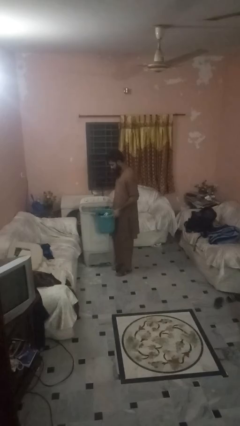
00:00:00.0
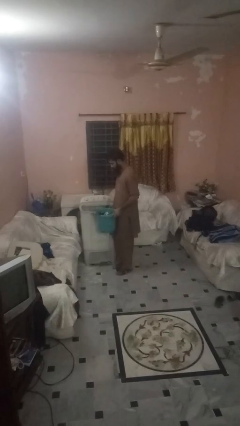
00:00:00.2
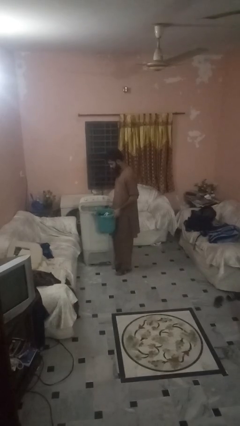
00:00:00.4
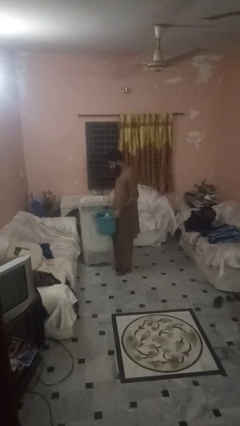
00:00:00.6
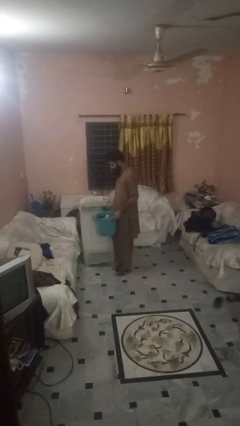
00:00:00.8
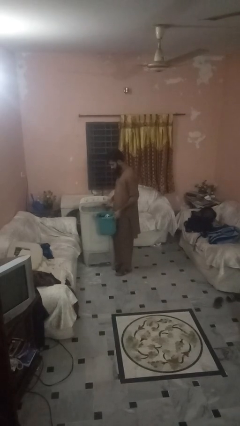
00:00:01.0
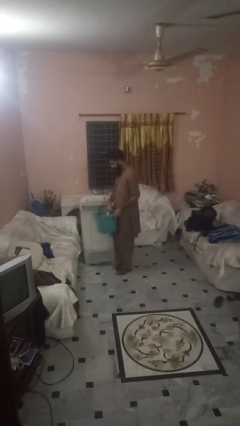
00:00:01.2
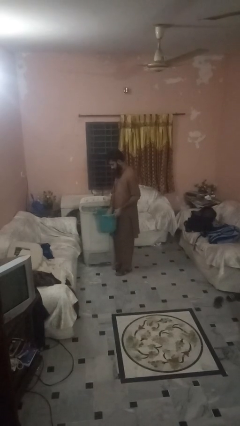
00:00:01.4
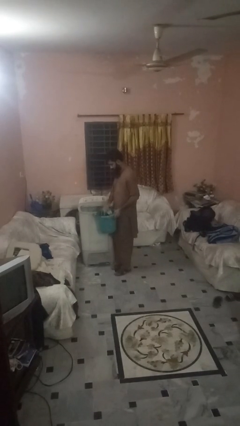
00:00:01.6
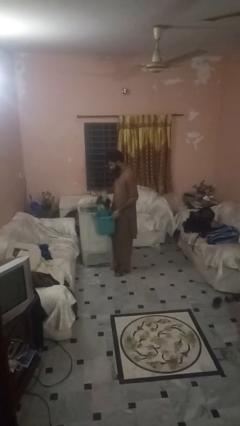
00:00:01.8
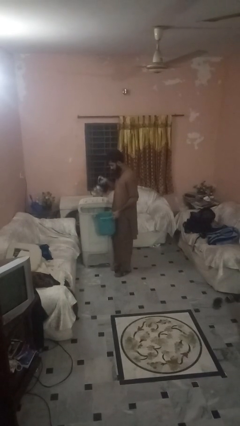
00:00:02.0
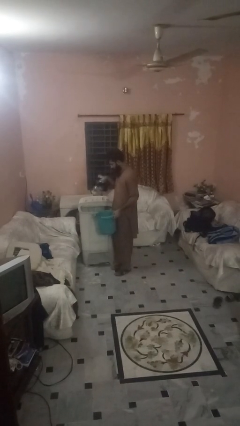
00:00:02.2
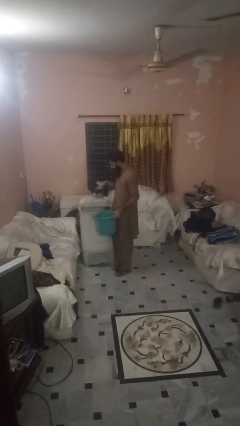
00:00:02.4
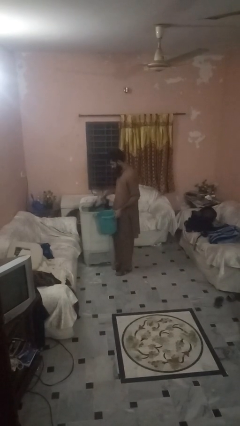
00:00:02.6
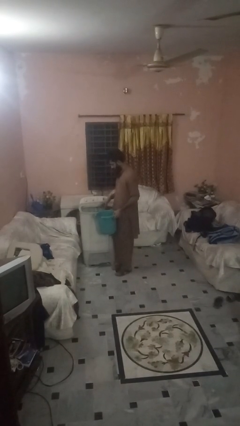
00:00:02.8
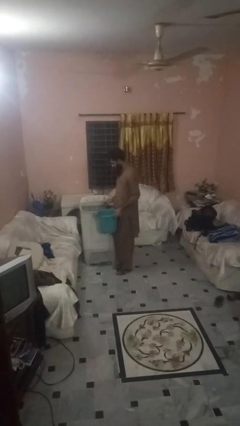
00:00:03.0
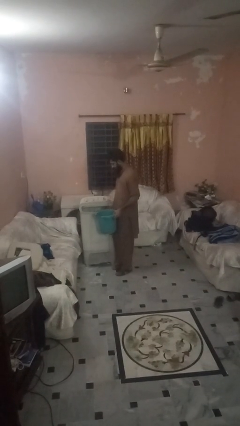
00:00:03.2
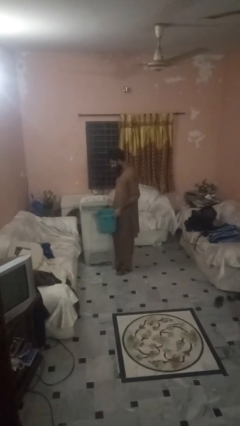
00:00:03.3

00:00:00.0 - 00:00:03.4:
person loads clotheswasher

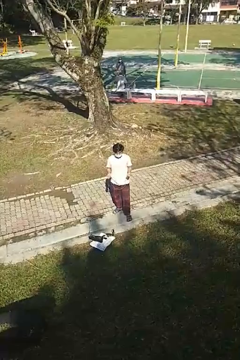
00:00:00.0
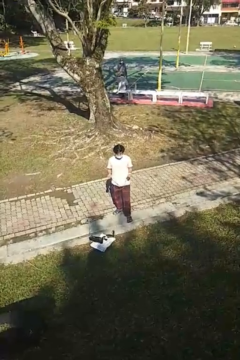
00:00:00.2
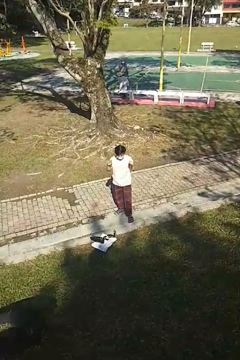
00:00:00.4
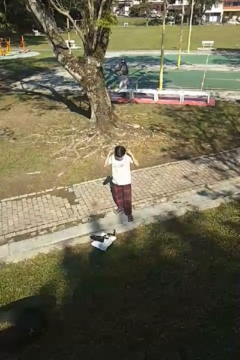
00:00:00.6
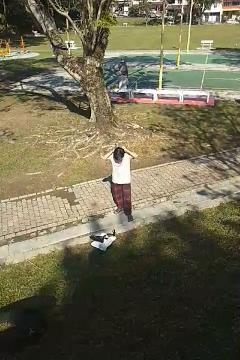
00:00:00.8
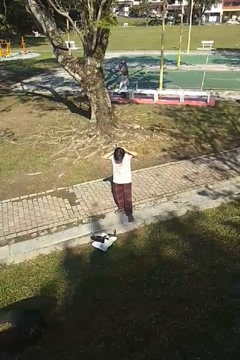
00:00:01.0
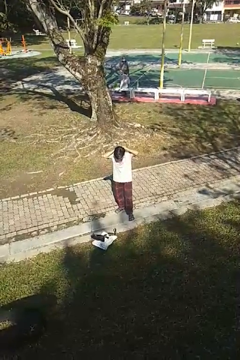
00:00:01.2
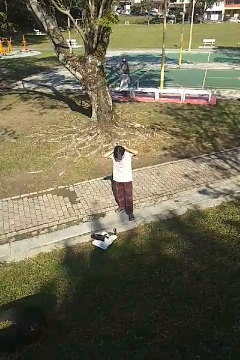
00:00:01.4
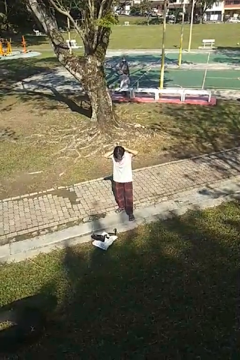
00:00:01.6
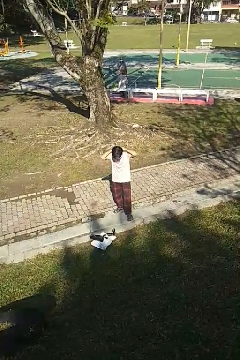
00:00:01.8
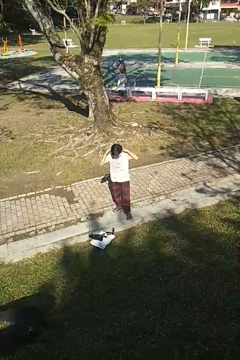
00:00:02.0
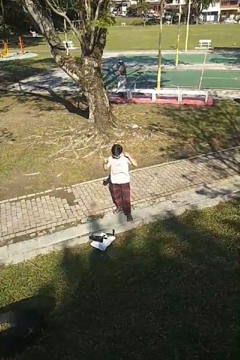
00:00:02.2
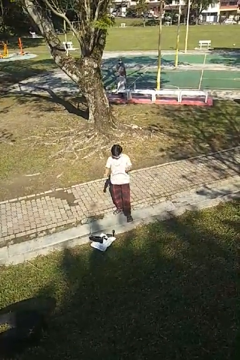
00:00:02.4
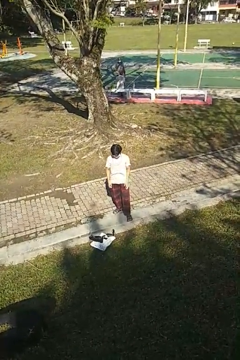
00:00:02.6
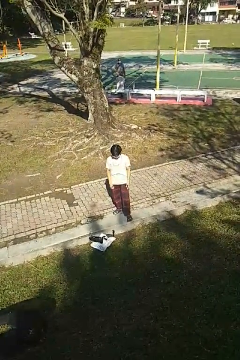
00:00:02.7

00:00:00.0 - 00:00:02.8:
person puts on necklace

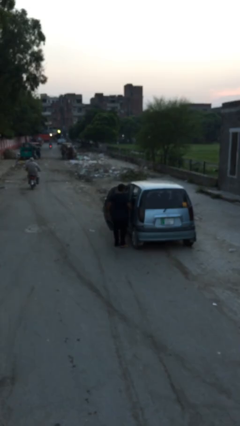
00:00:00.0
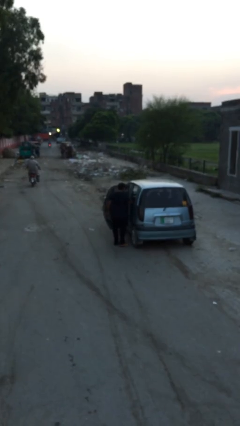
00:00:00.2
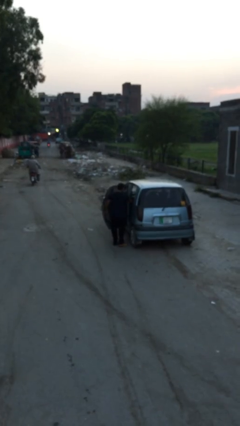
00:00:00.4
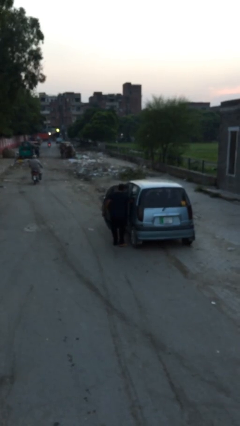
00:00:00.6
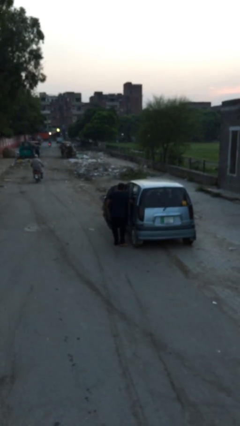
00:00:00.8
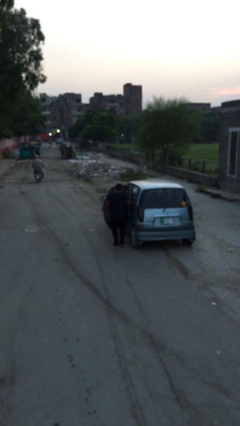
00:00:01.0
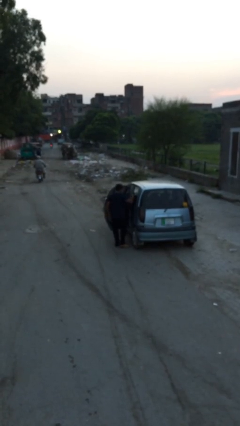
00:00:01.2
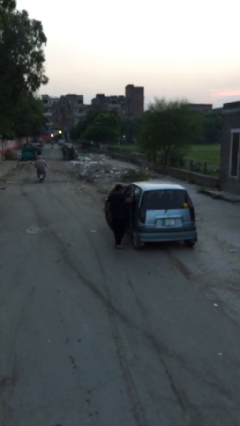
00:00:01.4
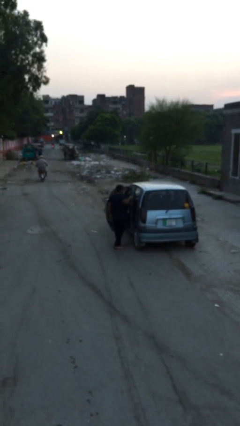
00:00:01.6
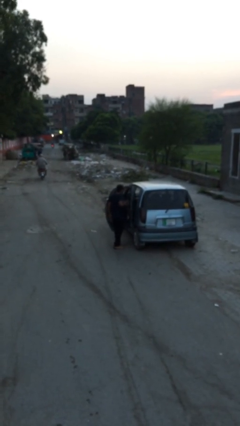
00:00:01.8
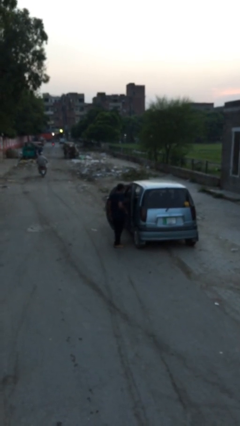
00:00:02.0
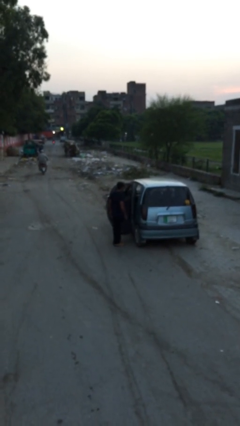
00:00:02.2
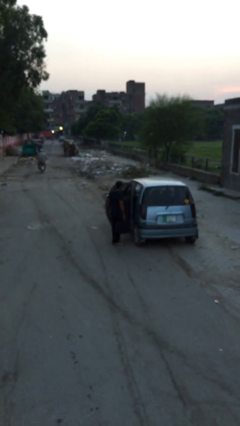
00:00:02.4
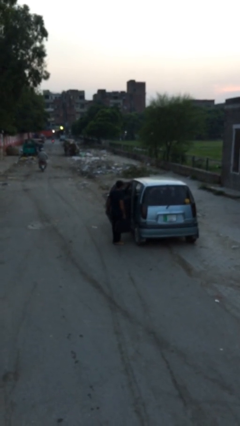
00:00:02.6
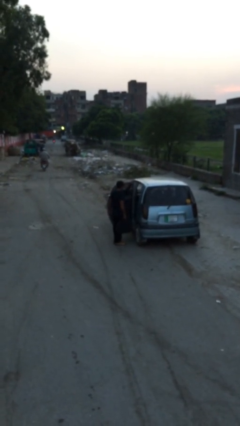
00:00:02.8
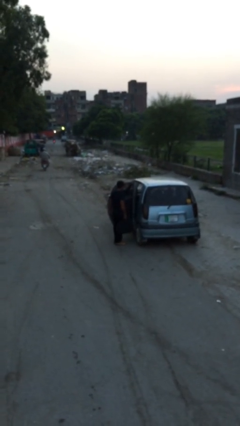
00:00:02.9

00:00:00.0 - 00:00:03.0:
person unloads car

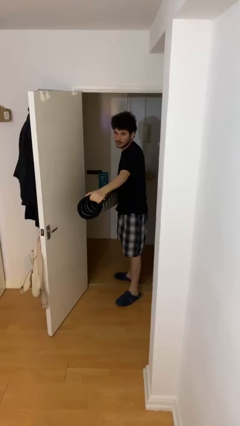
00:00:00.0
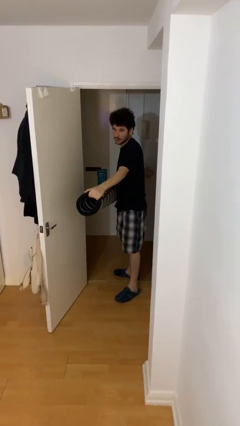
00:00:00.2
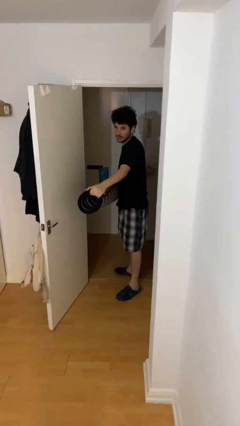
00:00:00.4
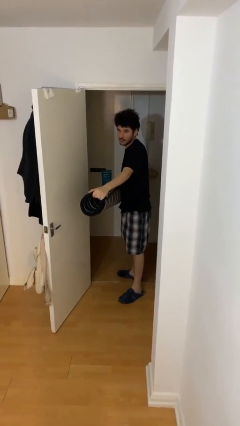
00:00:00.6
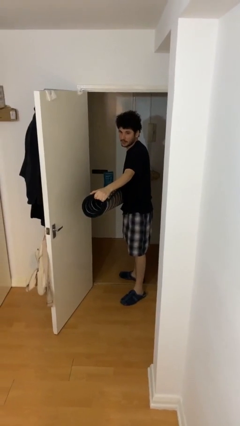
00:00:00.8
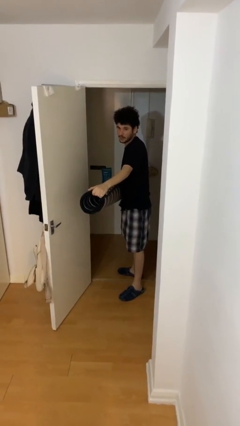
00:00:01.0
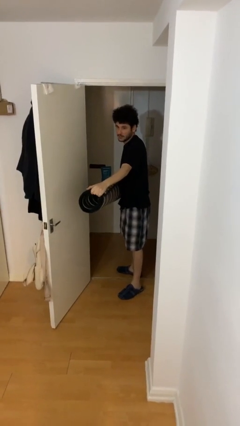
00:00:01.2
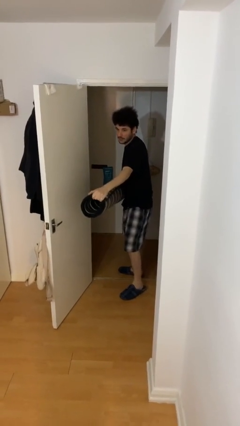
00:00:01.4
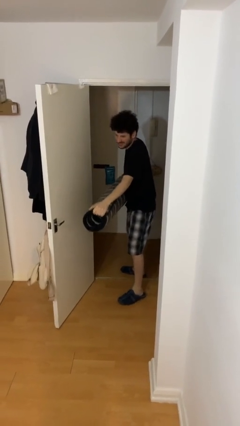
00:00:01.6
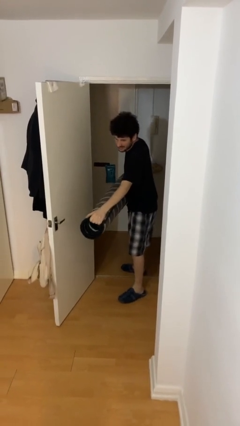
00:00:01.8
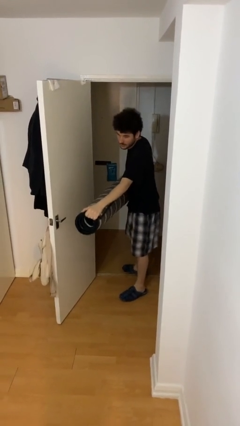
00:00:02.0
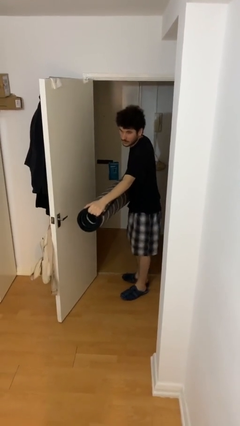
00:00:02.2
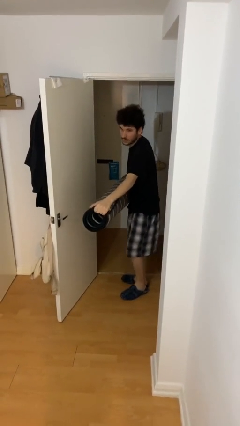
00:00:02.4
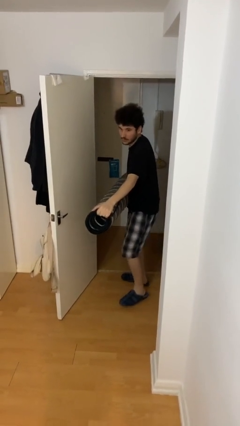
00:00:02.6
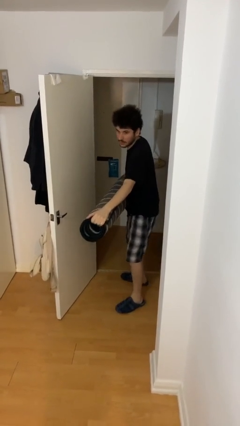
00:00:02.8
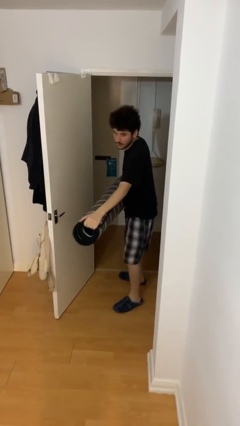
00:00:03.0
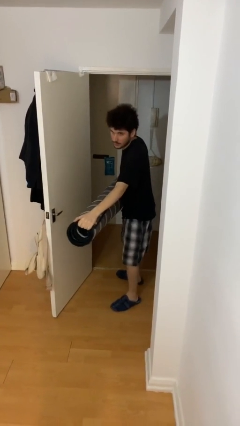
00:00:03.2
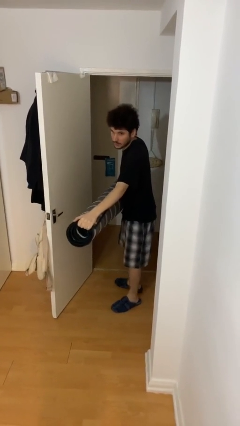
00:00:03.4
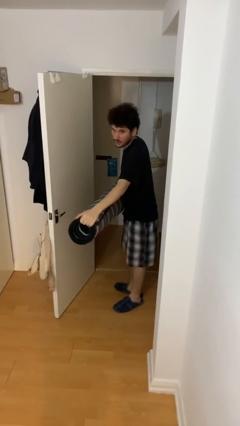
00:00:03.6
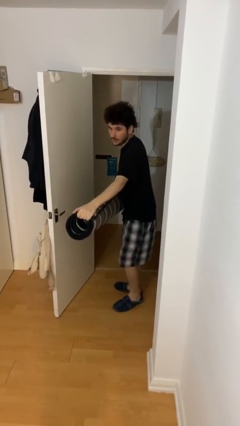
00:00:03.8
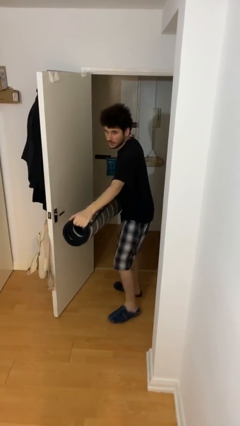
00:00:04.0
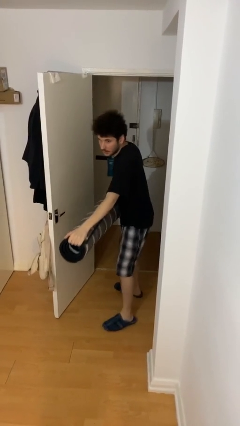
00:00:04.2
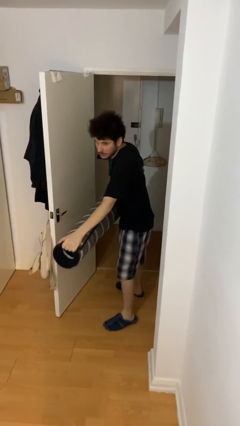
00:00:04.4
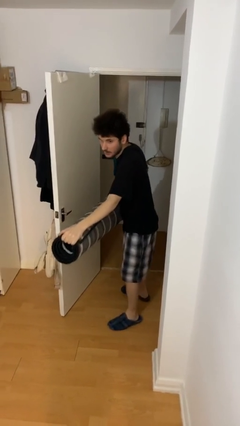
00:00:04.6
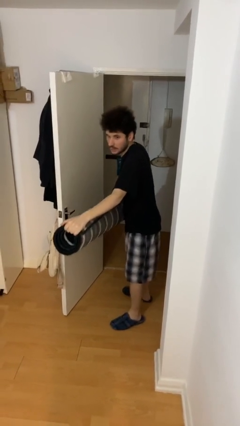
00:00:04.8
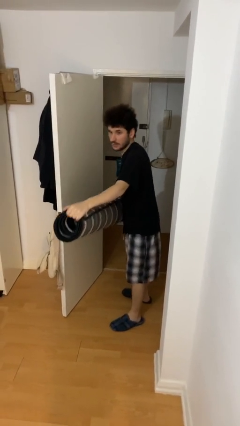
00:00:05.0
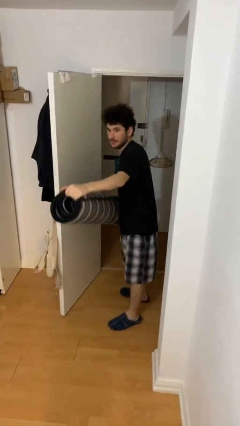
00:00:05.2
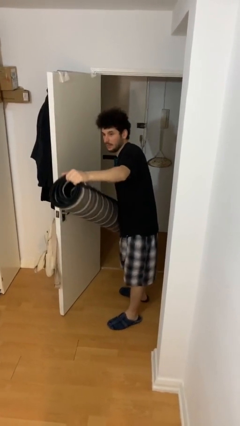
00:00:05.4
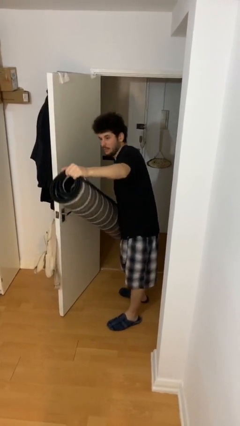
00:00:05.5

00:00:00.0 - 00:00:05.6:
person carries heavy object

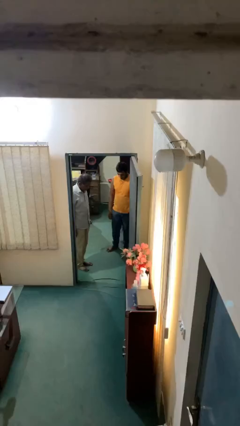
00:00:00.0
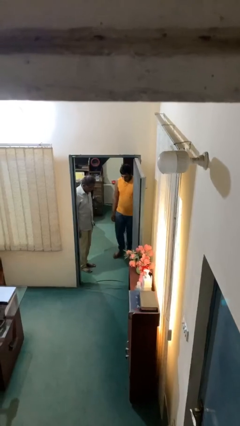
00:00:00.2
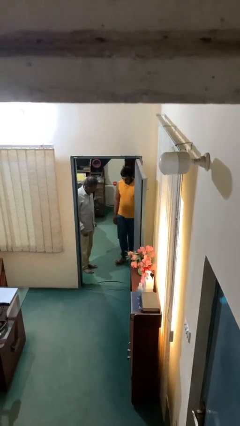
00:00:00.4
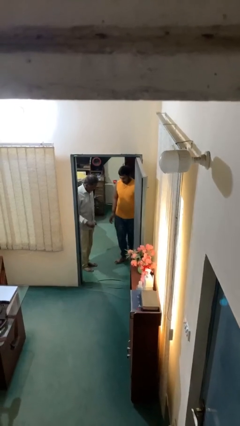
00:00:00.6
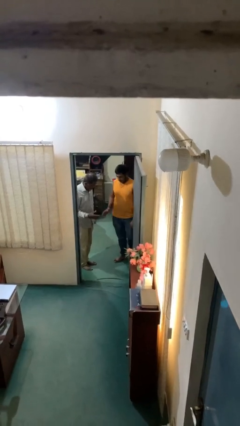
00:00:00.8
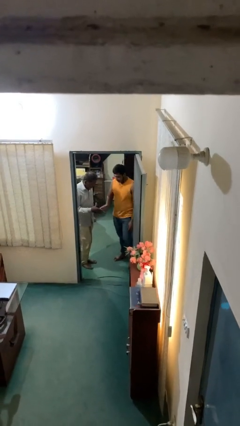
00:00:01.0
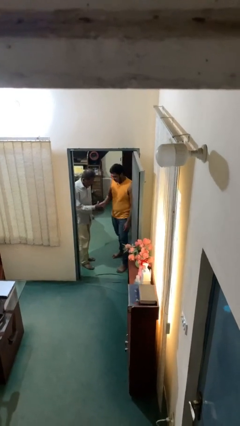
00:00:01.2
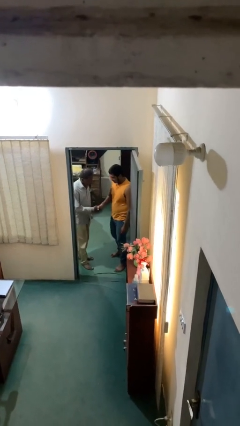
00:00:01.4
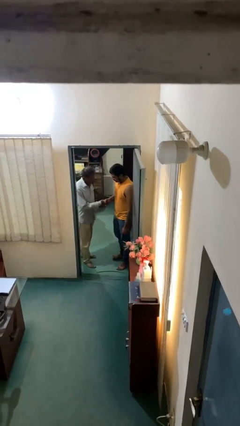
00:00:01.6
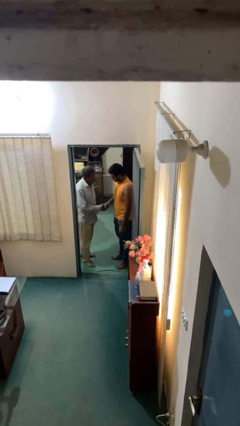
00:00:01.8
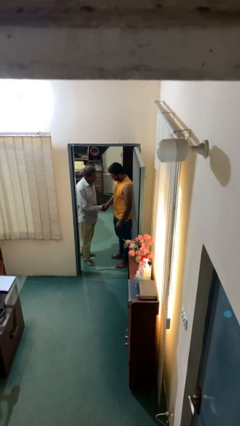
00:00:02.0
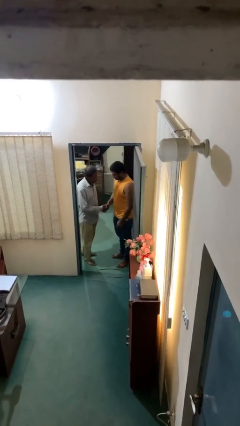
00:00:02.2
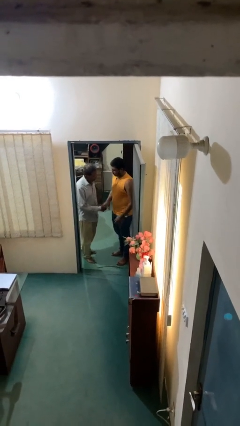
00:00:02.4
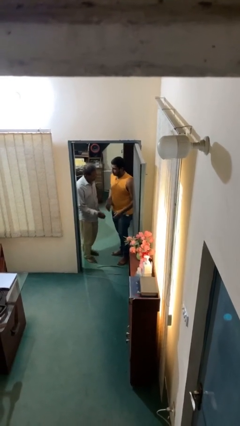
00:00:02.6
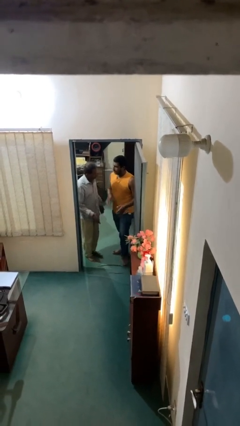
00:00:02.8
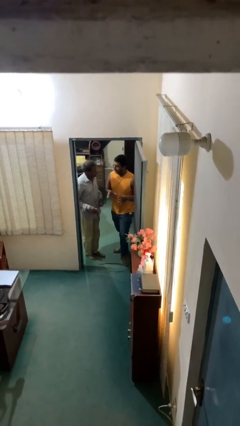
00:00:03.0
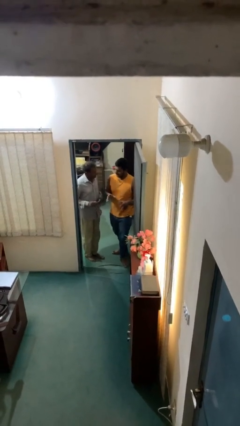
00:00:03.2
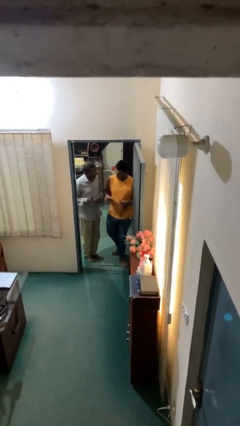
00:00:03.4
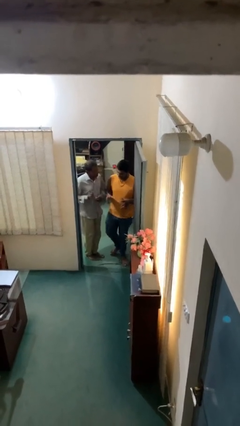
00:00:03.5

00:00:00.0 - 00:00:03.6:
person shakes hand
